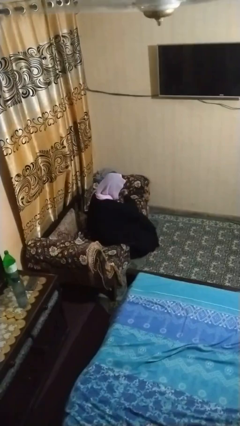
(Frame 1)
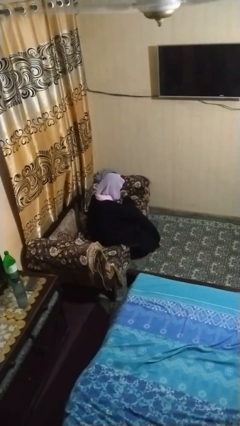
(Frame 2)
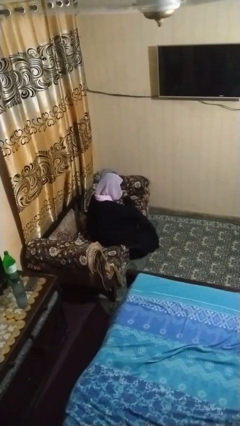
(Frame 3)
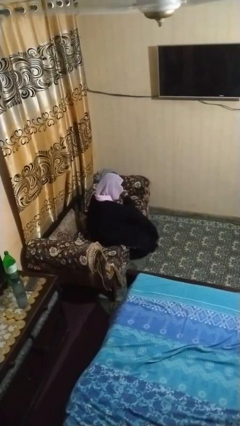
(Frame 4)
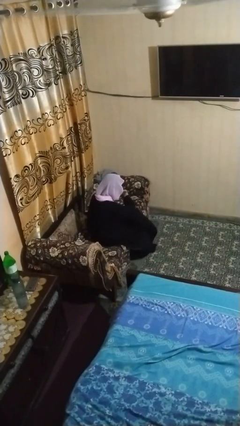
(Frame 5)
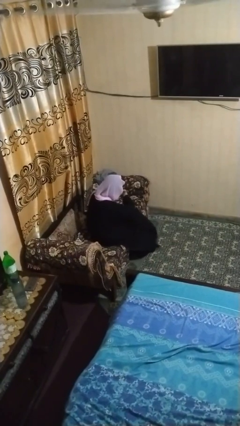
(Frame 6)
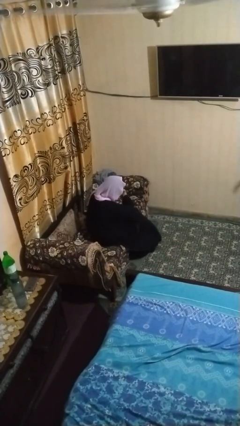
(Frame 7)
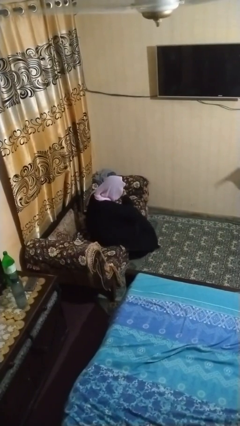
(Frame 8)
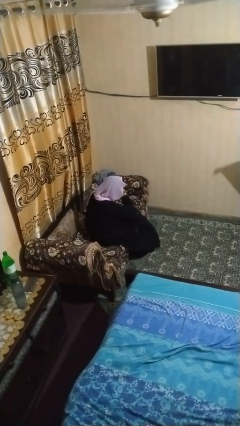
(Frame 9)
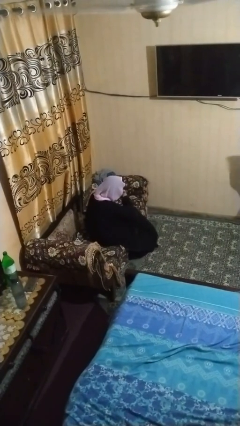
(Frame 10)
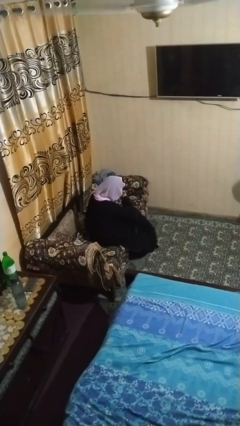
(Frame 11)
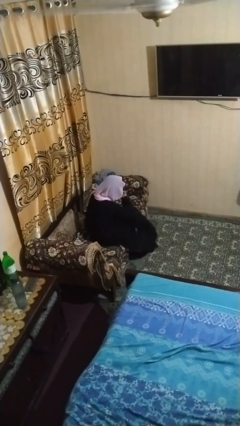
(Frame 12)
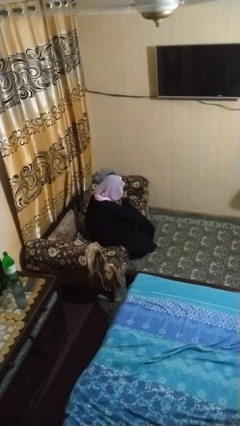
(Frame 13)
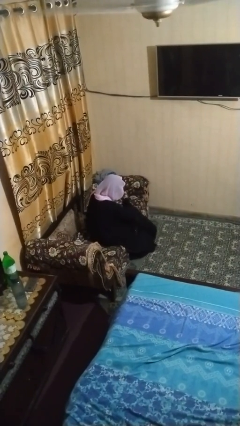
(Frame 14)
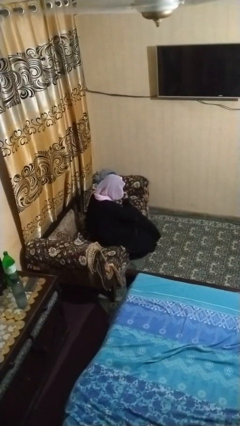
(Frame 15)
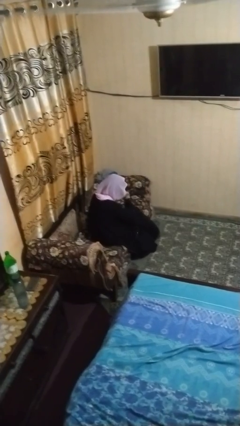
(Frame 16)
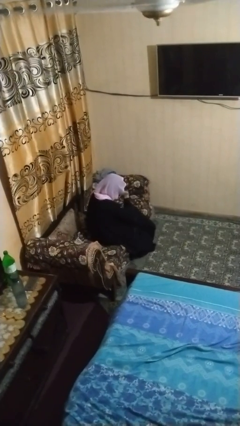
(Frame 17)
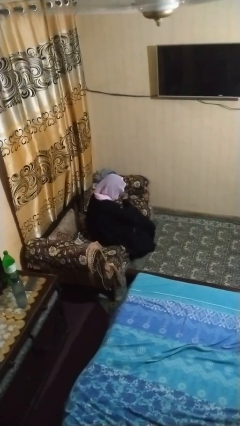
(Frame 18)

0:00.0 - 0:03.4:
person looks at wristwatch

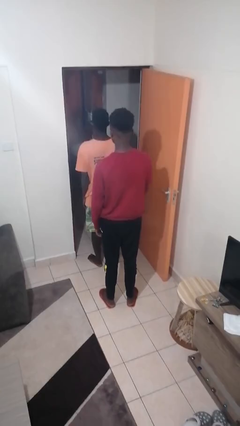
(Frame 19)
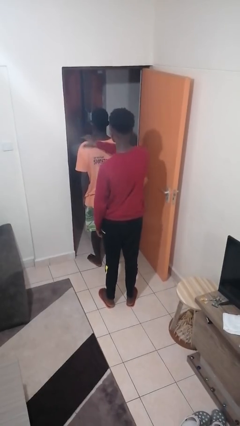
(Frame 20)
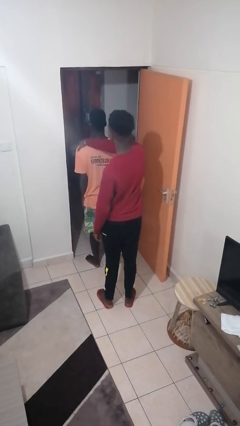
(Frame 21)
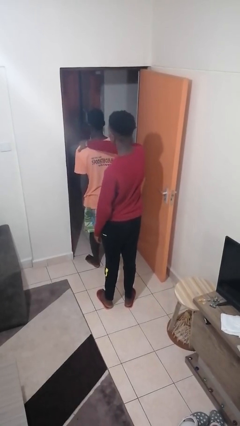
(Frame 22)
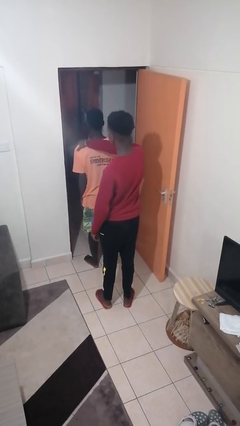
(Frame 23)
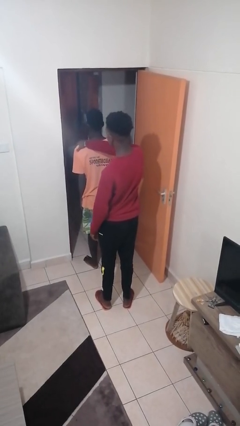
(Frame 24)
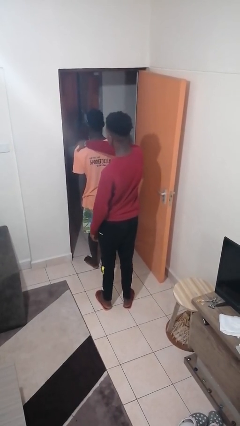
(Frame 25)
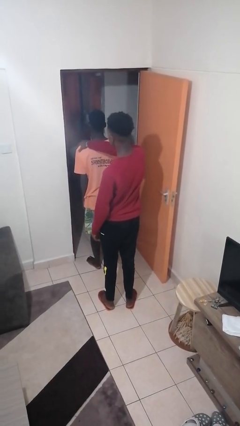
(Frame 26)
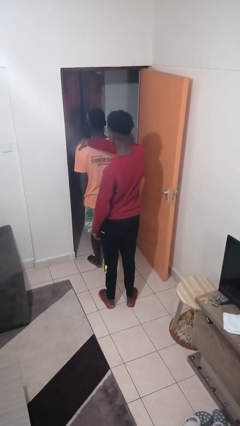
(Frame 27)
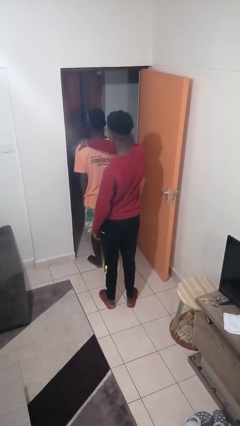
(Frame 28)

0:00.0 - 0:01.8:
person grabs person by shoulder

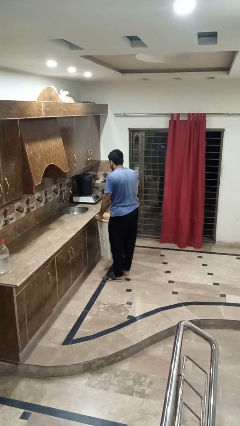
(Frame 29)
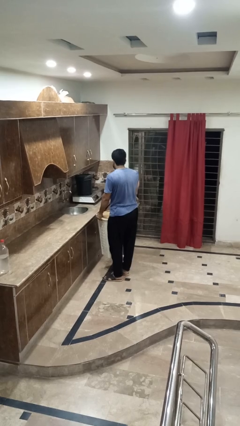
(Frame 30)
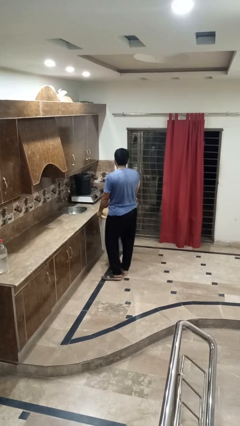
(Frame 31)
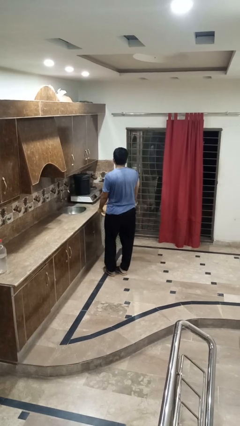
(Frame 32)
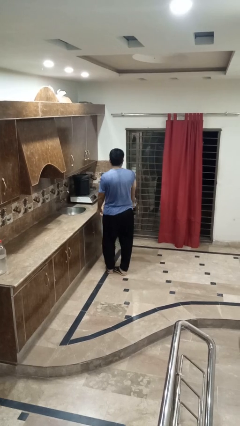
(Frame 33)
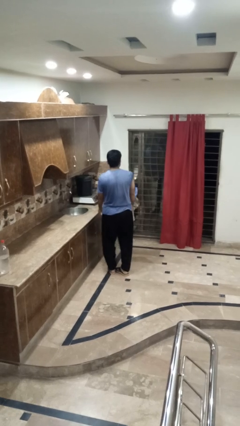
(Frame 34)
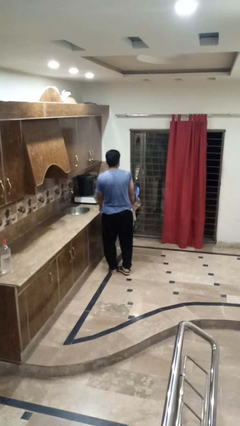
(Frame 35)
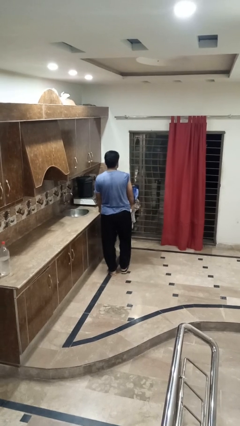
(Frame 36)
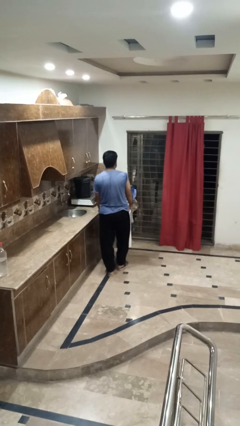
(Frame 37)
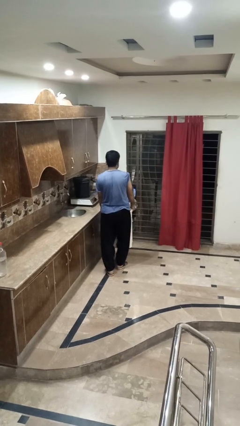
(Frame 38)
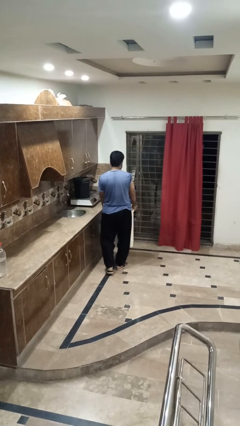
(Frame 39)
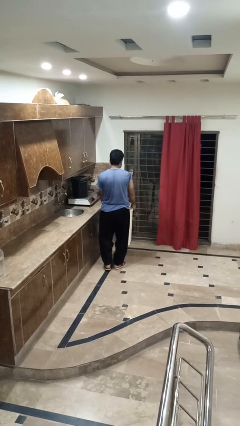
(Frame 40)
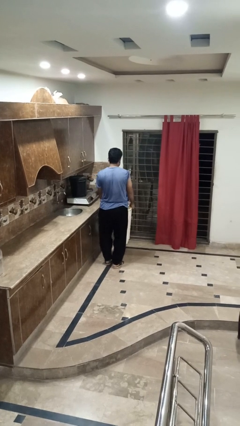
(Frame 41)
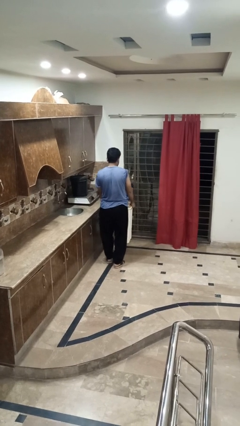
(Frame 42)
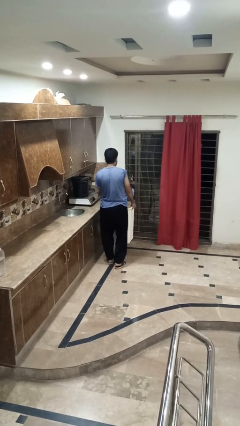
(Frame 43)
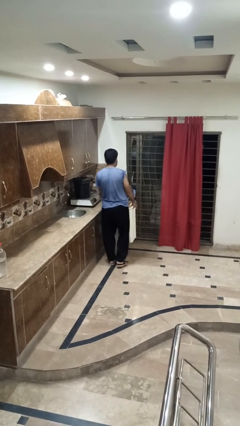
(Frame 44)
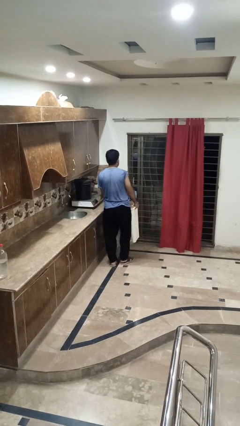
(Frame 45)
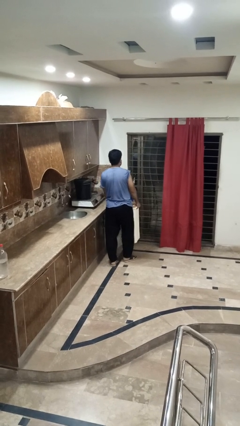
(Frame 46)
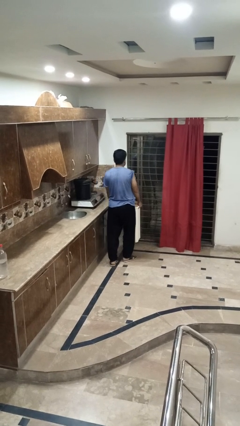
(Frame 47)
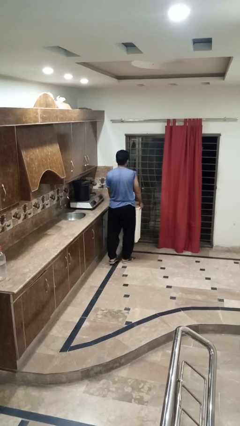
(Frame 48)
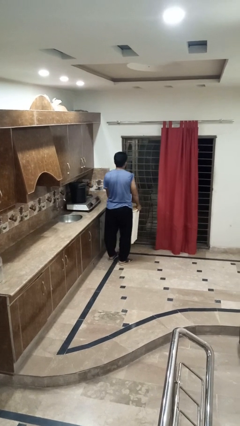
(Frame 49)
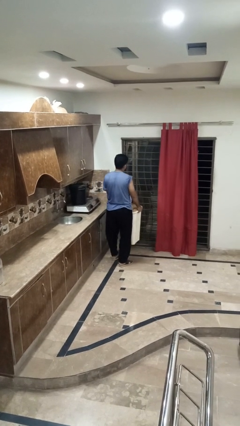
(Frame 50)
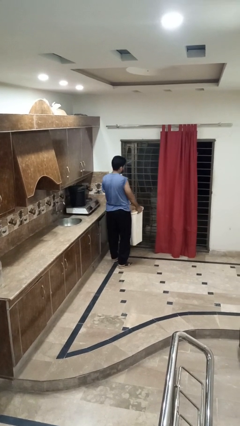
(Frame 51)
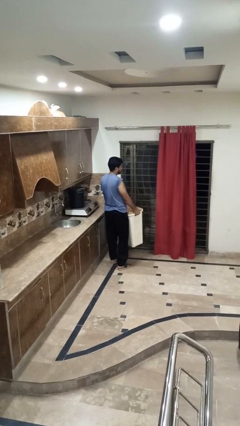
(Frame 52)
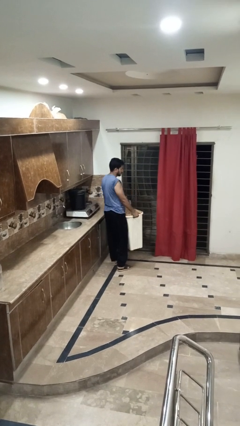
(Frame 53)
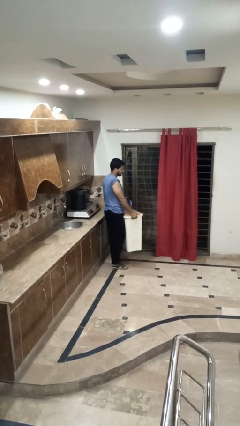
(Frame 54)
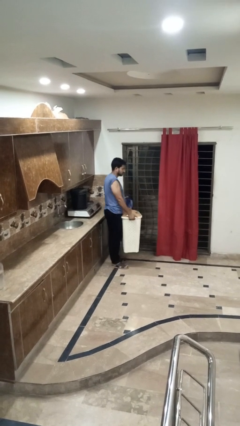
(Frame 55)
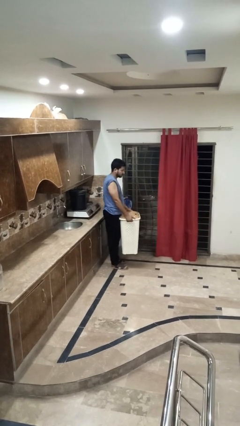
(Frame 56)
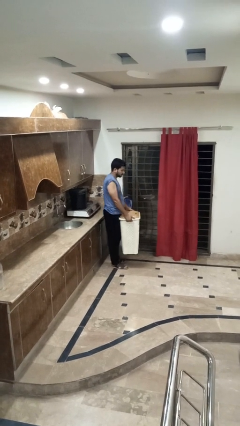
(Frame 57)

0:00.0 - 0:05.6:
person carries laundry basket

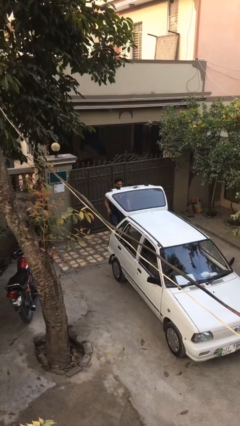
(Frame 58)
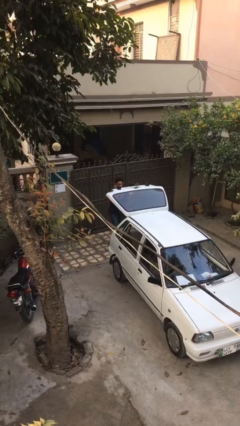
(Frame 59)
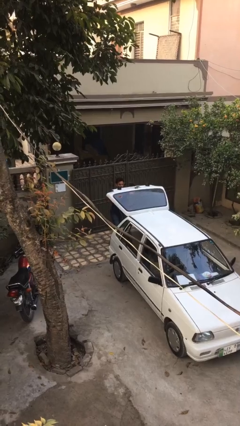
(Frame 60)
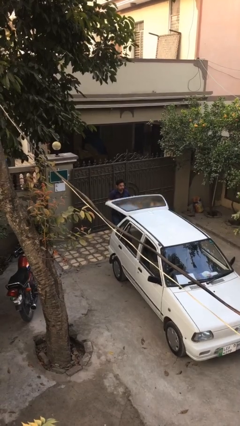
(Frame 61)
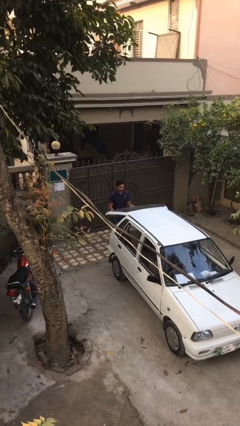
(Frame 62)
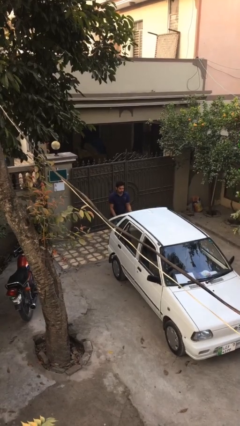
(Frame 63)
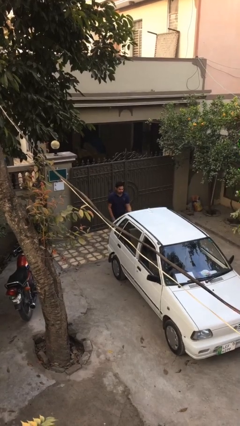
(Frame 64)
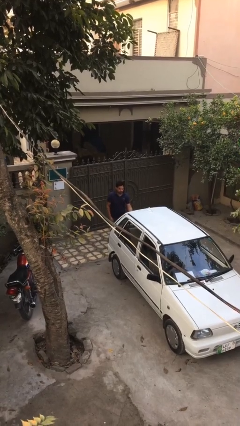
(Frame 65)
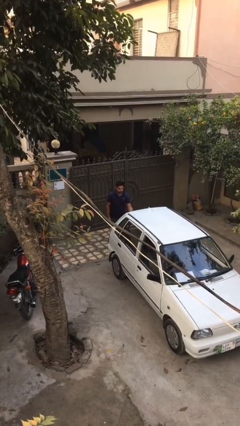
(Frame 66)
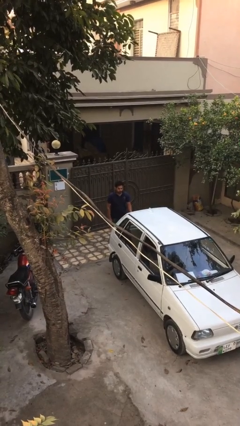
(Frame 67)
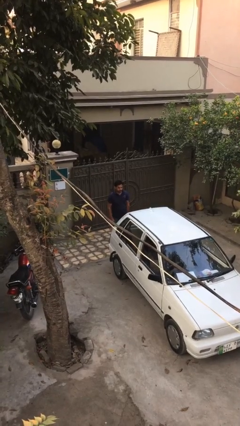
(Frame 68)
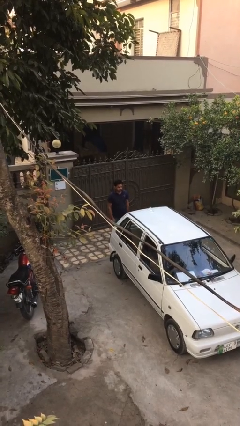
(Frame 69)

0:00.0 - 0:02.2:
person closes car trunk

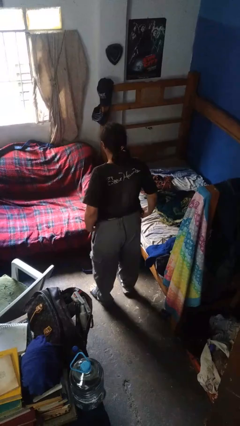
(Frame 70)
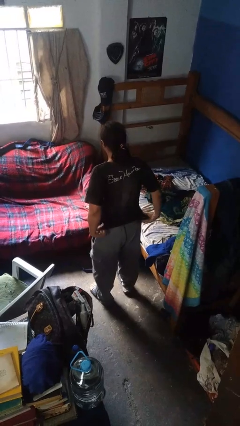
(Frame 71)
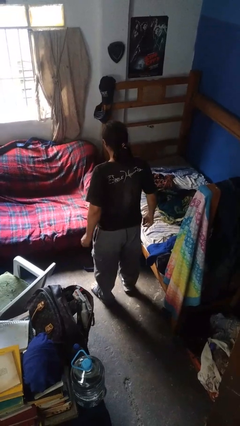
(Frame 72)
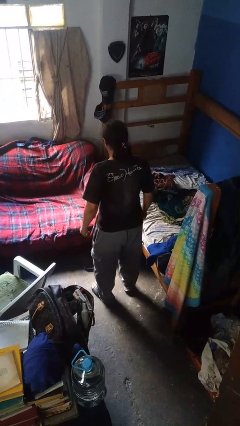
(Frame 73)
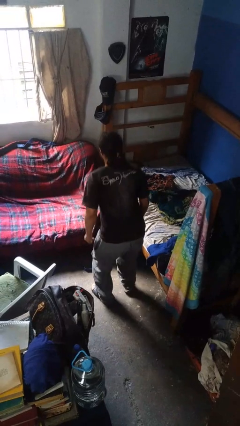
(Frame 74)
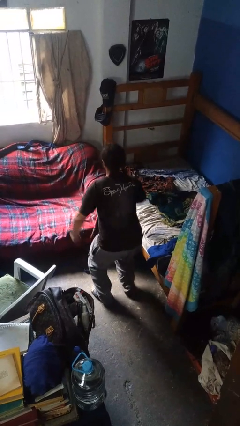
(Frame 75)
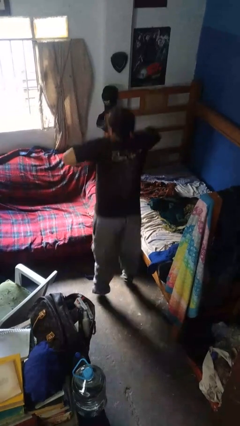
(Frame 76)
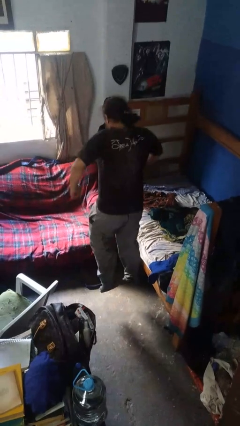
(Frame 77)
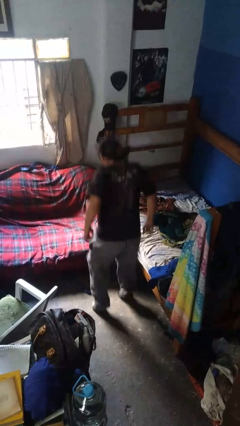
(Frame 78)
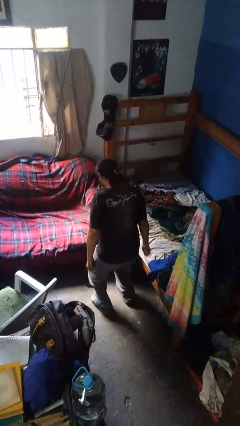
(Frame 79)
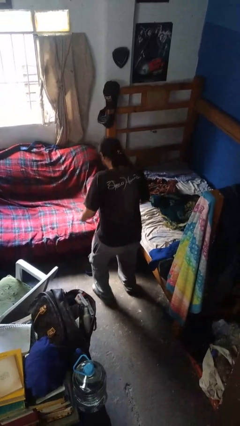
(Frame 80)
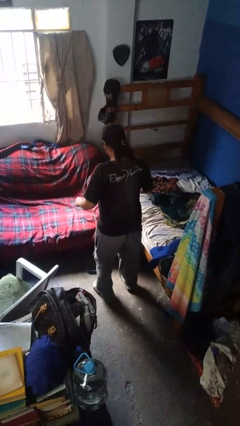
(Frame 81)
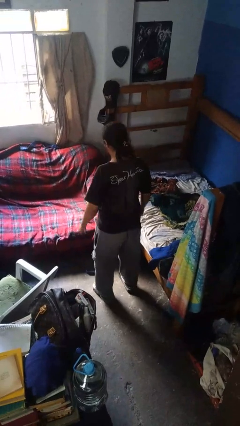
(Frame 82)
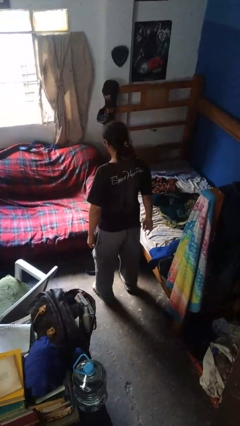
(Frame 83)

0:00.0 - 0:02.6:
person jumps

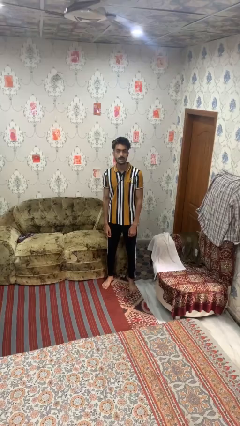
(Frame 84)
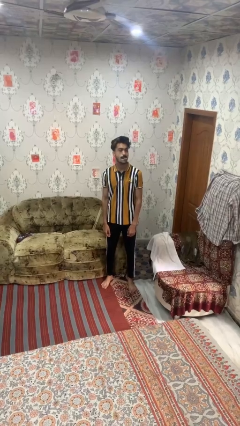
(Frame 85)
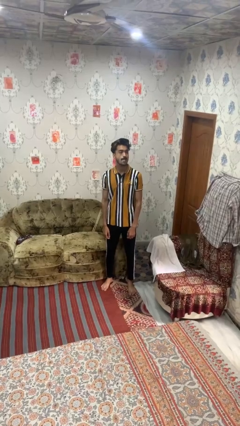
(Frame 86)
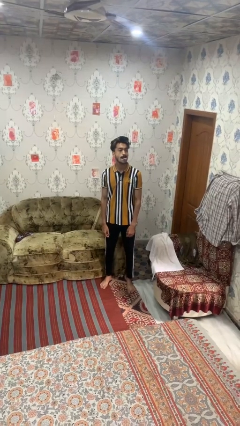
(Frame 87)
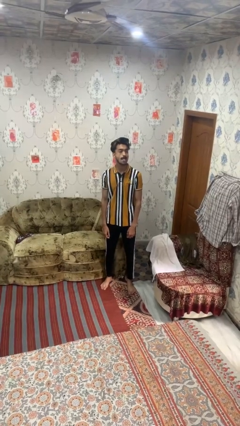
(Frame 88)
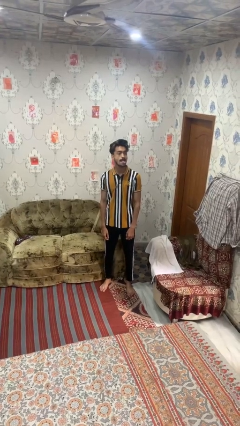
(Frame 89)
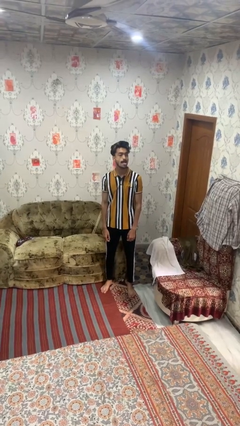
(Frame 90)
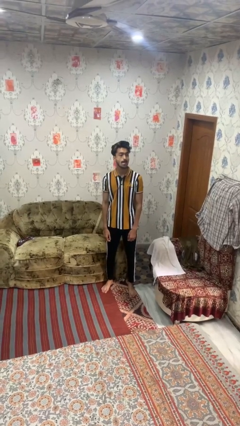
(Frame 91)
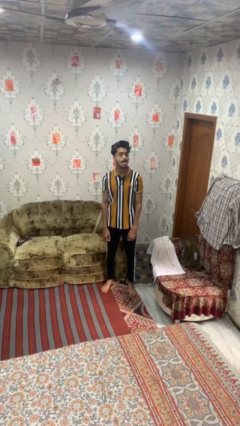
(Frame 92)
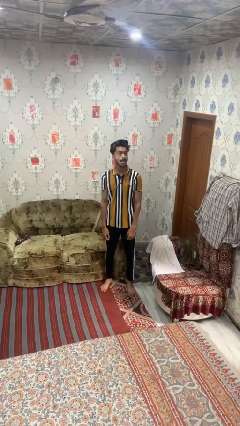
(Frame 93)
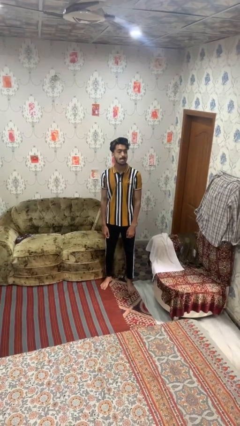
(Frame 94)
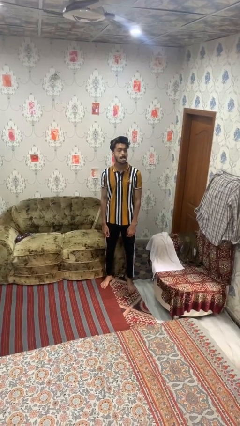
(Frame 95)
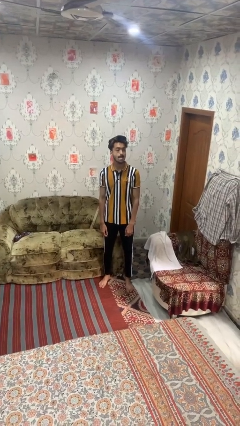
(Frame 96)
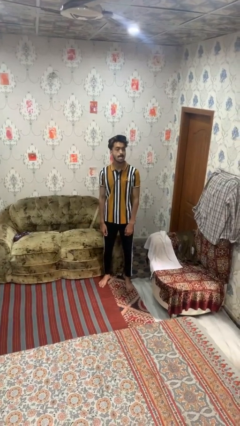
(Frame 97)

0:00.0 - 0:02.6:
person sticks out tongue
